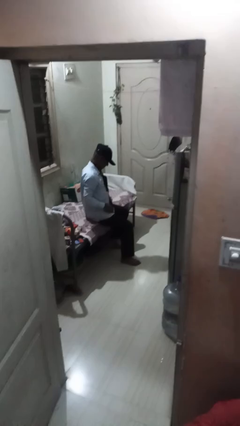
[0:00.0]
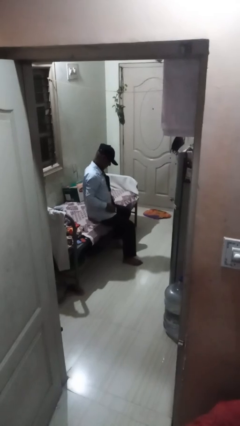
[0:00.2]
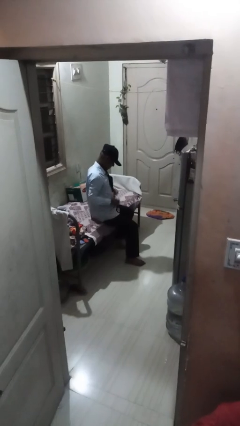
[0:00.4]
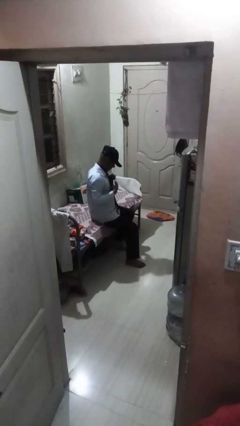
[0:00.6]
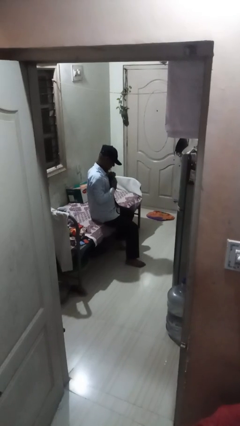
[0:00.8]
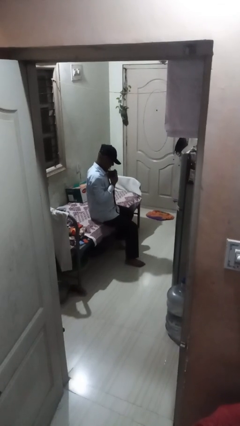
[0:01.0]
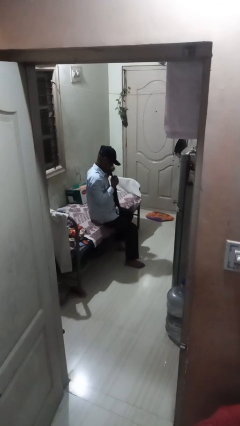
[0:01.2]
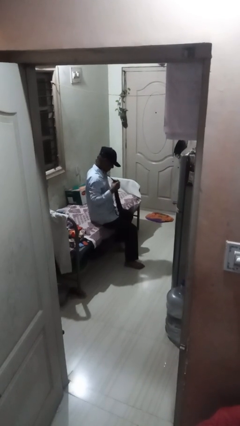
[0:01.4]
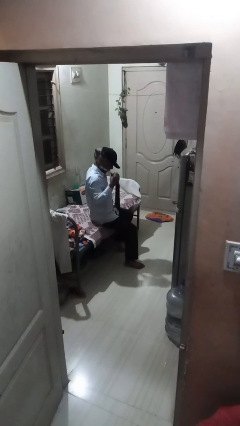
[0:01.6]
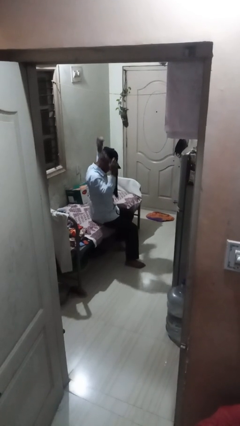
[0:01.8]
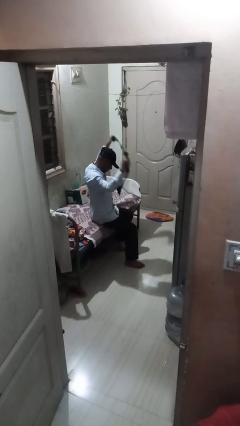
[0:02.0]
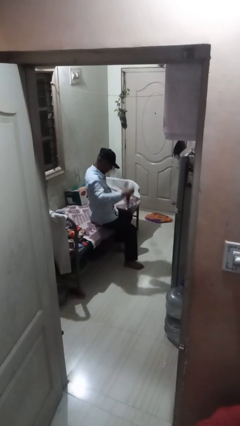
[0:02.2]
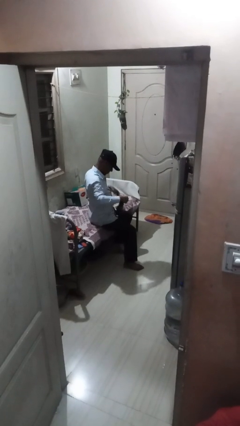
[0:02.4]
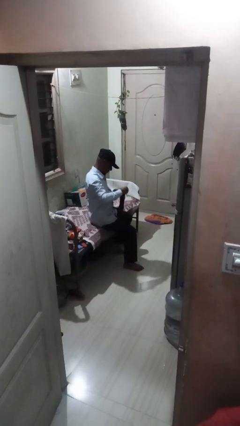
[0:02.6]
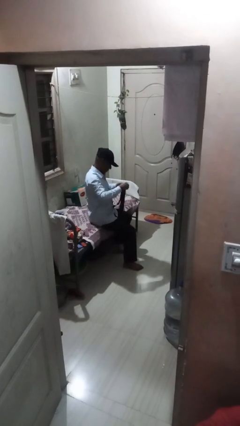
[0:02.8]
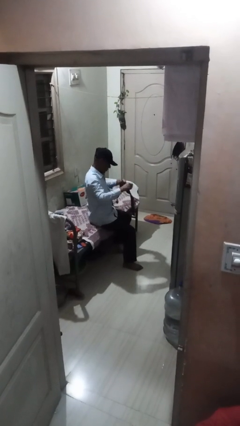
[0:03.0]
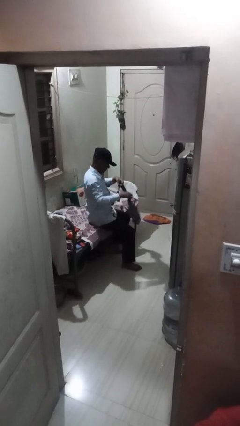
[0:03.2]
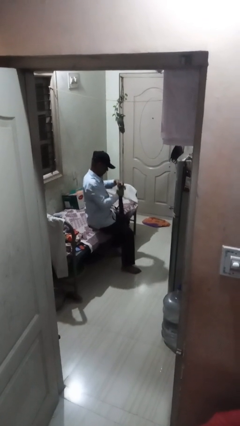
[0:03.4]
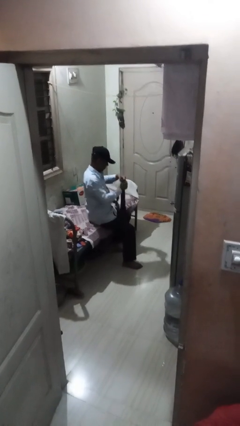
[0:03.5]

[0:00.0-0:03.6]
person takes off necktie

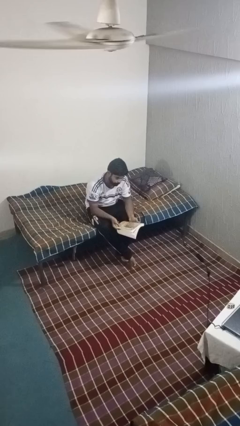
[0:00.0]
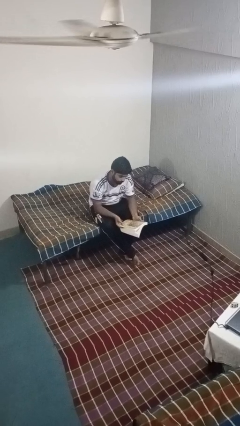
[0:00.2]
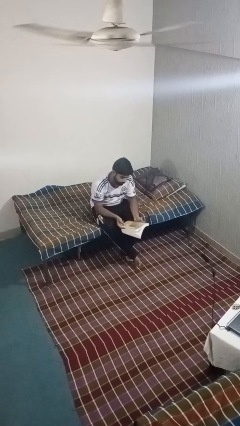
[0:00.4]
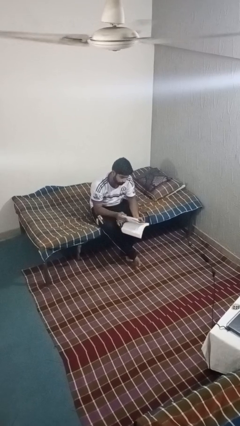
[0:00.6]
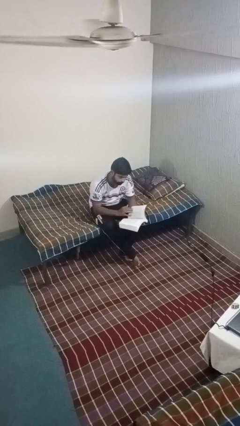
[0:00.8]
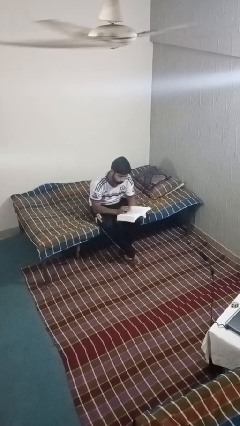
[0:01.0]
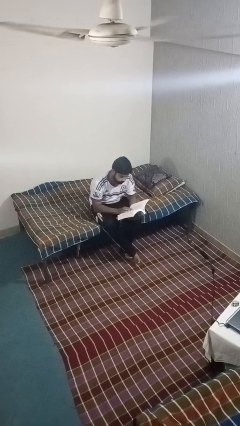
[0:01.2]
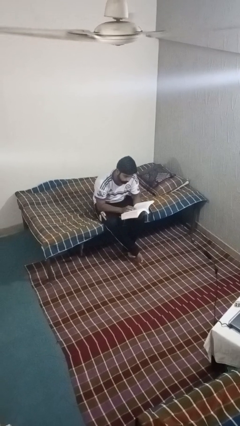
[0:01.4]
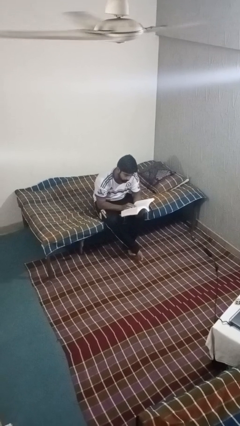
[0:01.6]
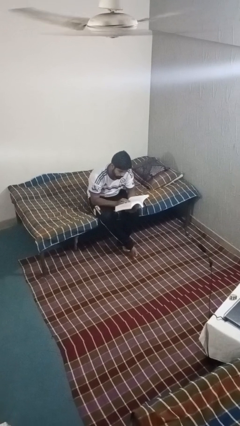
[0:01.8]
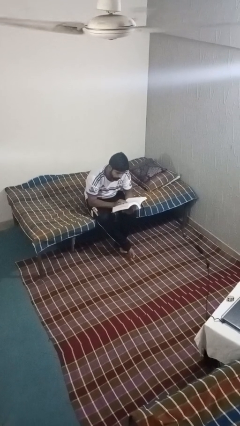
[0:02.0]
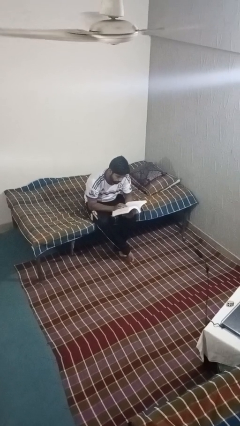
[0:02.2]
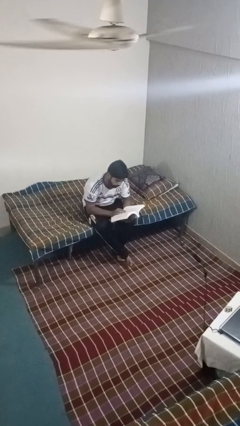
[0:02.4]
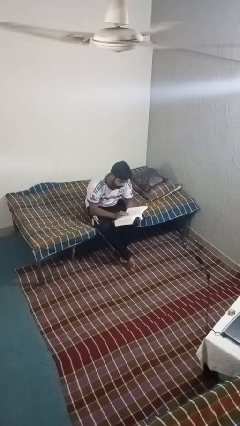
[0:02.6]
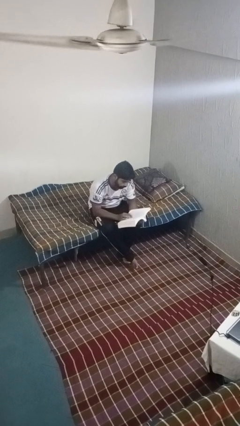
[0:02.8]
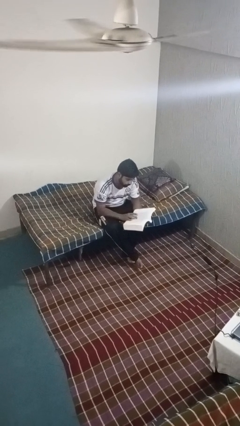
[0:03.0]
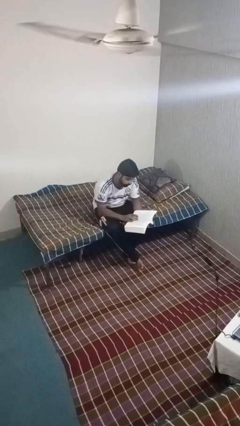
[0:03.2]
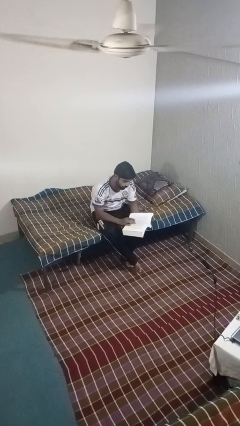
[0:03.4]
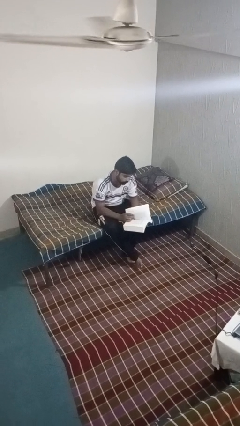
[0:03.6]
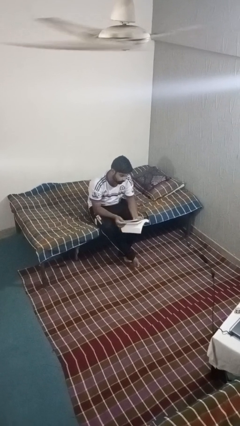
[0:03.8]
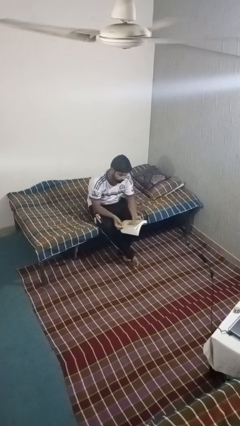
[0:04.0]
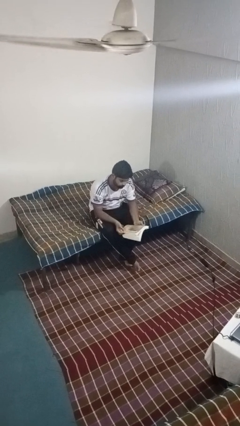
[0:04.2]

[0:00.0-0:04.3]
person reads book

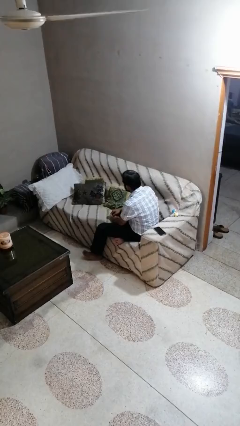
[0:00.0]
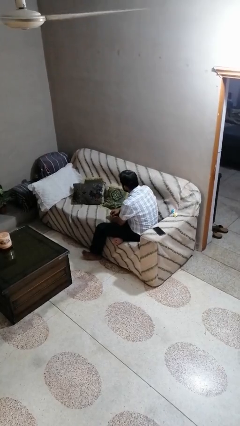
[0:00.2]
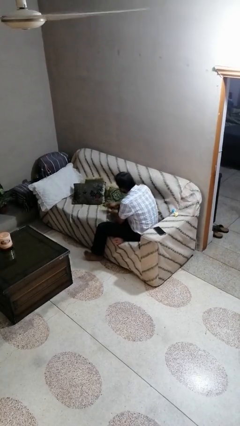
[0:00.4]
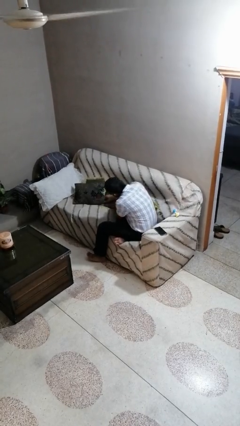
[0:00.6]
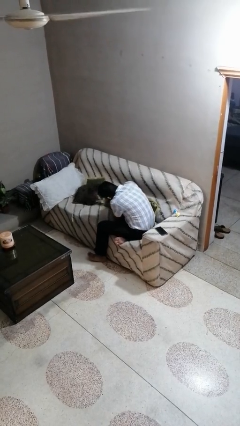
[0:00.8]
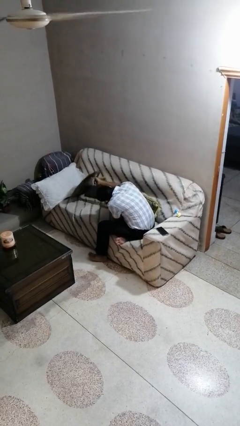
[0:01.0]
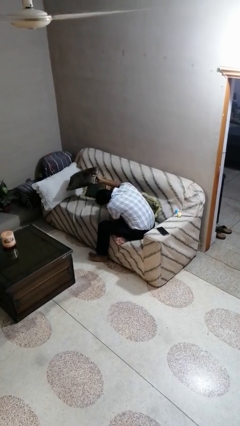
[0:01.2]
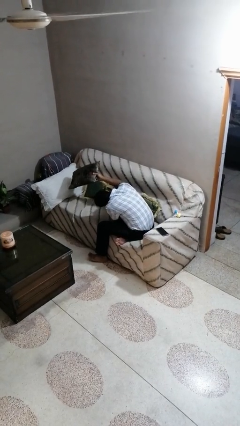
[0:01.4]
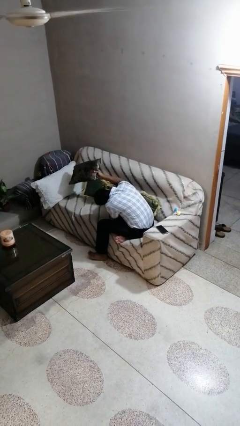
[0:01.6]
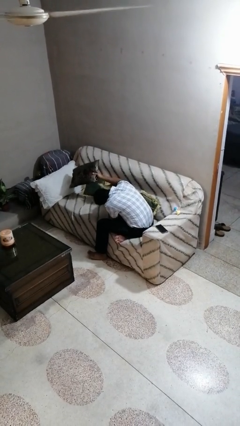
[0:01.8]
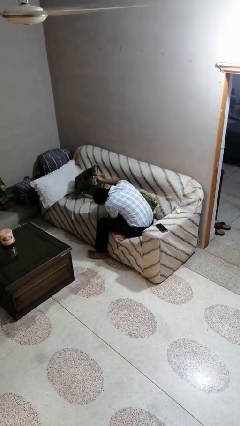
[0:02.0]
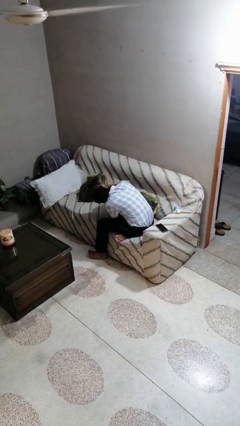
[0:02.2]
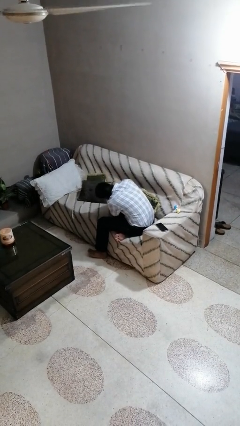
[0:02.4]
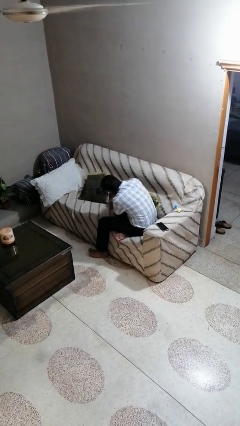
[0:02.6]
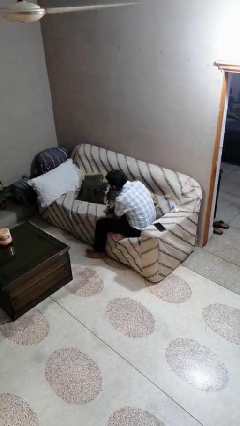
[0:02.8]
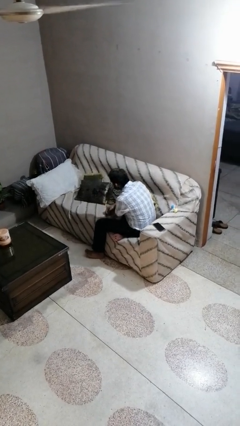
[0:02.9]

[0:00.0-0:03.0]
person searches in couch

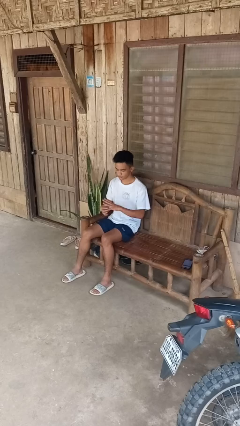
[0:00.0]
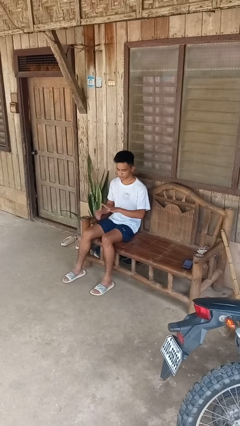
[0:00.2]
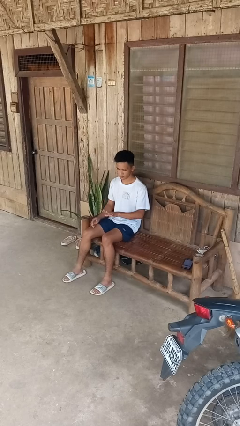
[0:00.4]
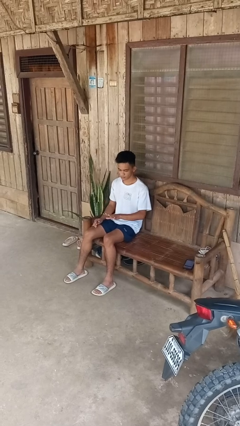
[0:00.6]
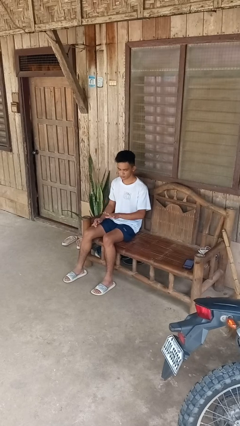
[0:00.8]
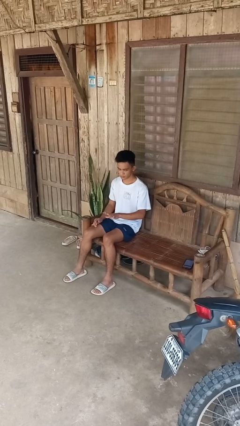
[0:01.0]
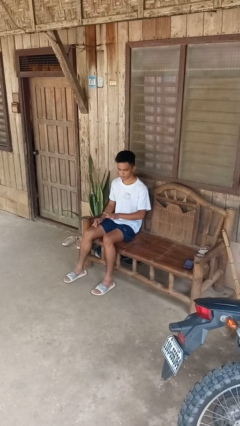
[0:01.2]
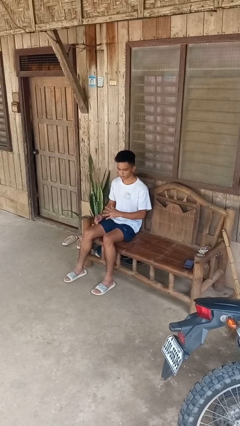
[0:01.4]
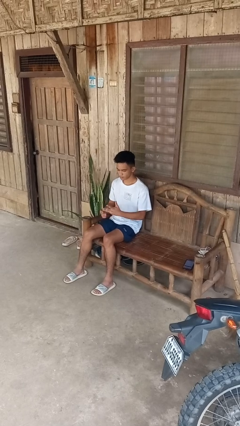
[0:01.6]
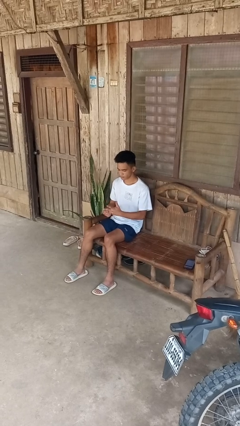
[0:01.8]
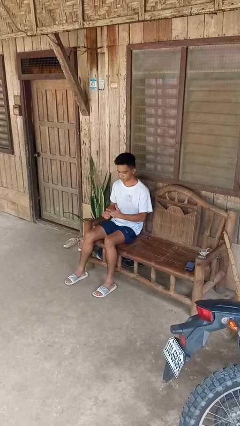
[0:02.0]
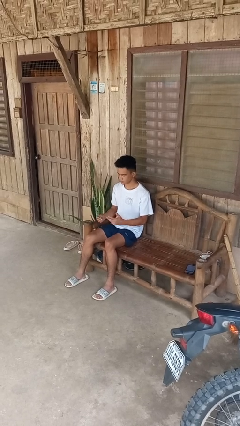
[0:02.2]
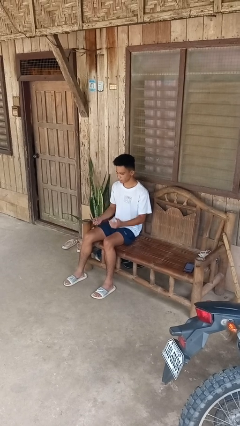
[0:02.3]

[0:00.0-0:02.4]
person puts on ring

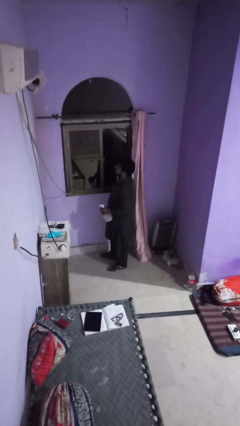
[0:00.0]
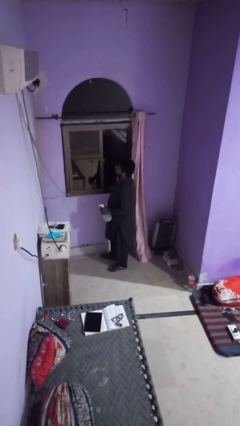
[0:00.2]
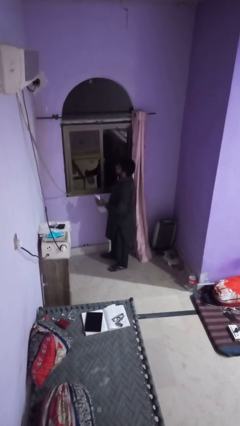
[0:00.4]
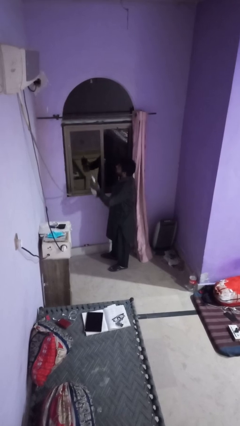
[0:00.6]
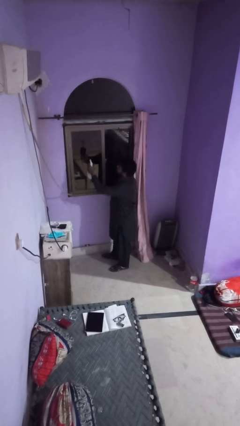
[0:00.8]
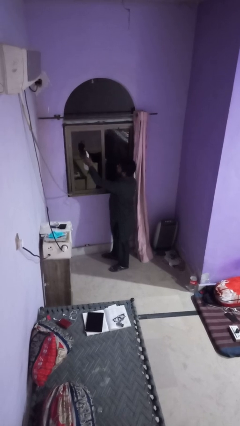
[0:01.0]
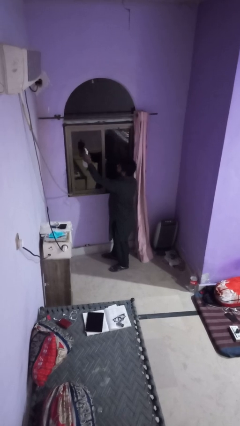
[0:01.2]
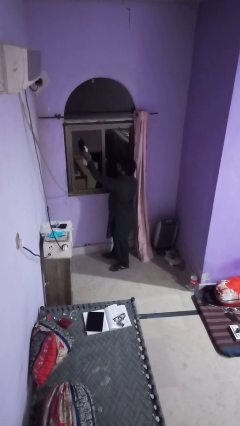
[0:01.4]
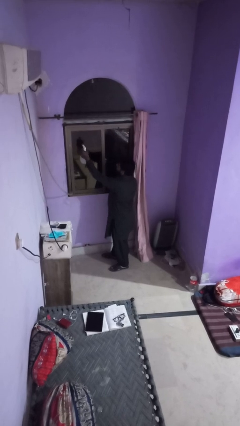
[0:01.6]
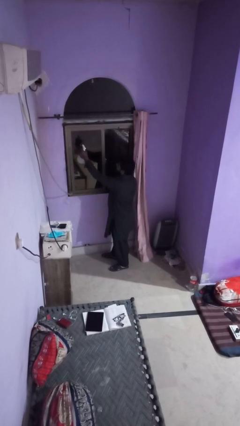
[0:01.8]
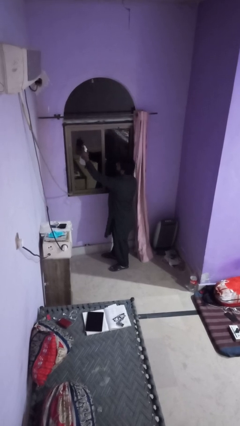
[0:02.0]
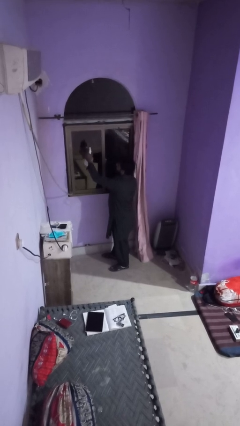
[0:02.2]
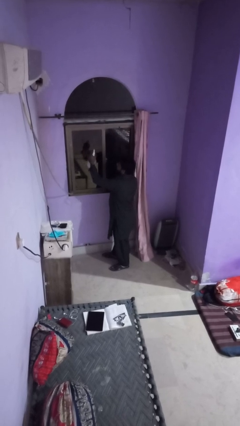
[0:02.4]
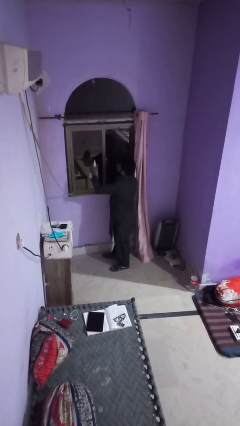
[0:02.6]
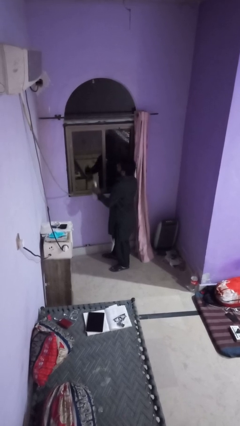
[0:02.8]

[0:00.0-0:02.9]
person sprays from bottle

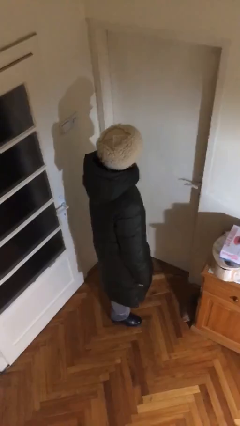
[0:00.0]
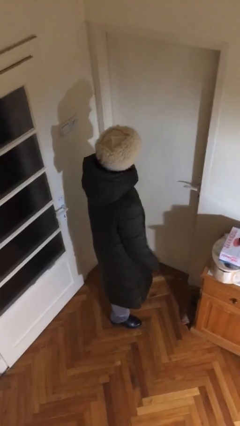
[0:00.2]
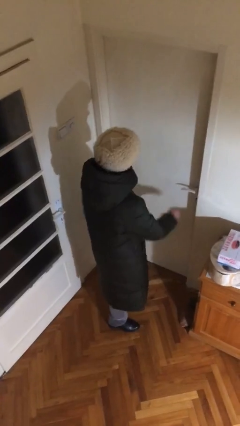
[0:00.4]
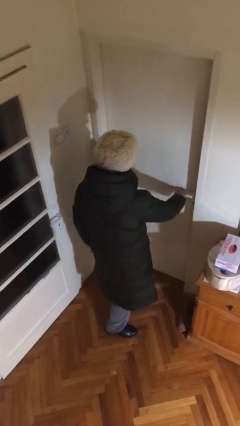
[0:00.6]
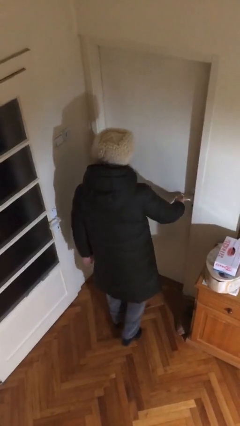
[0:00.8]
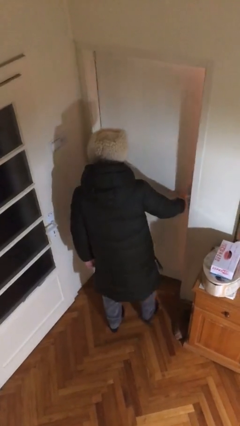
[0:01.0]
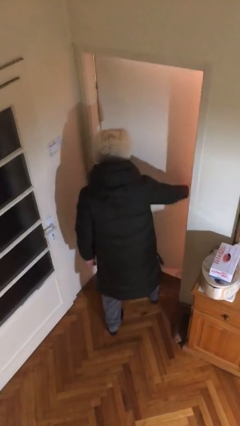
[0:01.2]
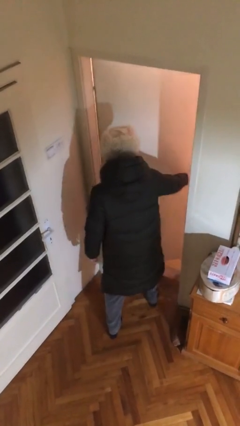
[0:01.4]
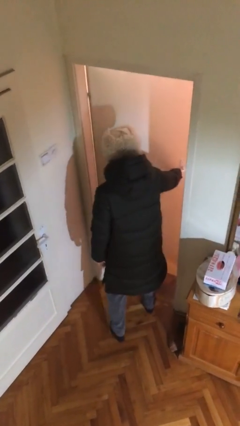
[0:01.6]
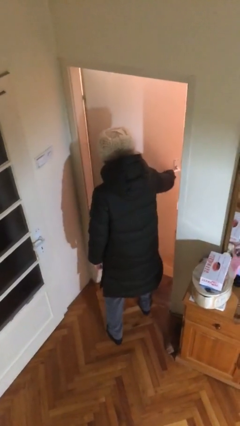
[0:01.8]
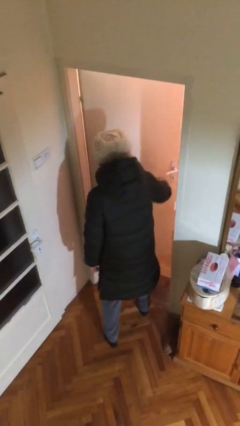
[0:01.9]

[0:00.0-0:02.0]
person opens facility door
